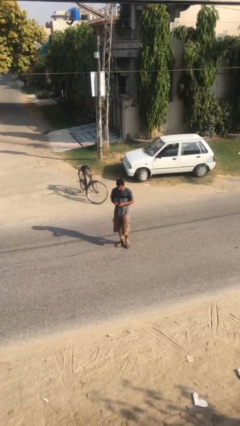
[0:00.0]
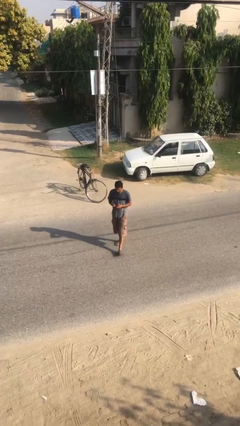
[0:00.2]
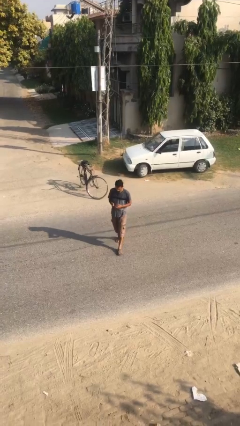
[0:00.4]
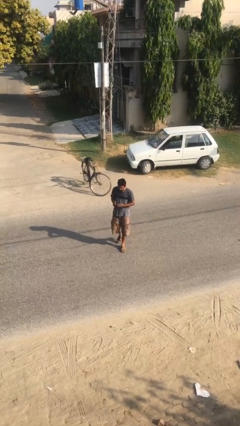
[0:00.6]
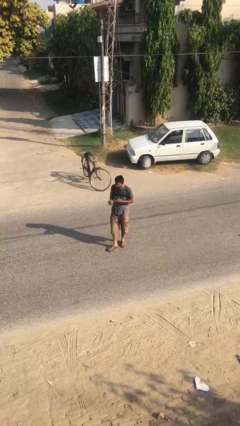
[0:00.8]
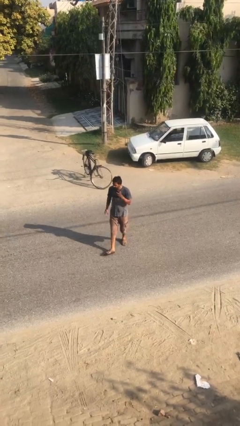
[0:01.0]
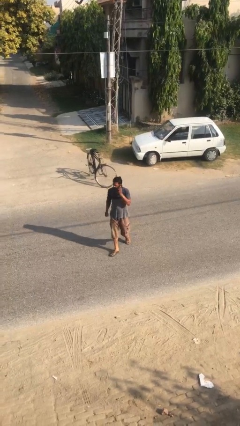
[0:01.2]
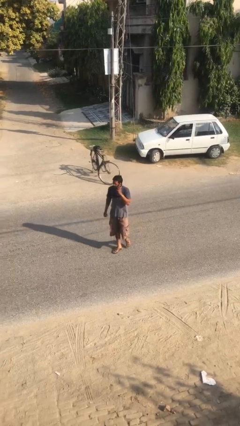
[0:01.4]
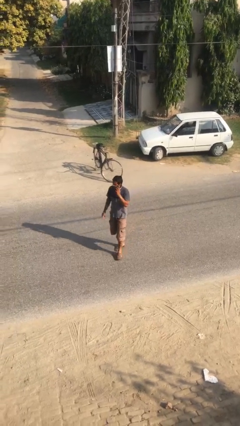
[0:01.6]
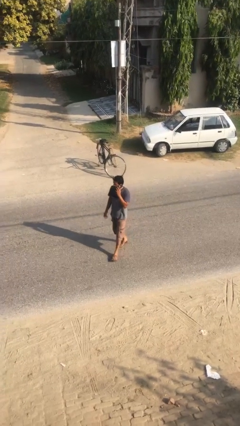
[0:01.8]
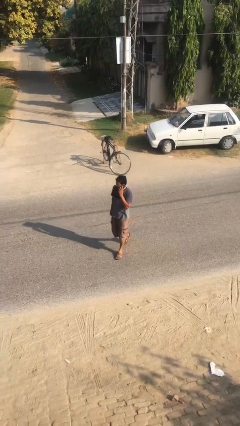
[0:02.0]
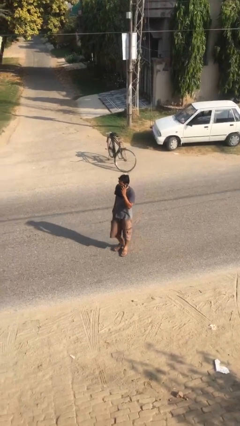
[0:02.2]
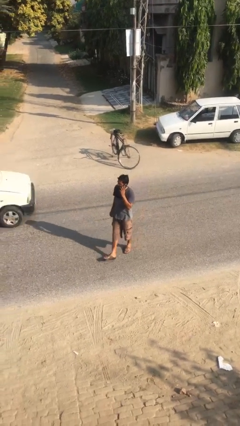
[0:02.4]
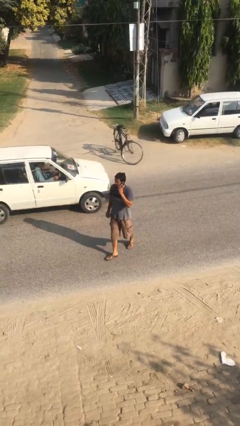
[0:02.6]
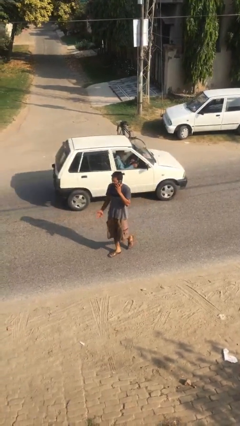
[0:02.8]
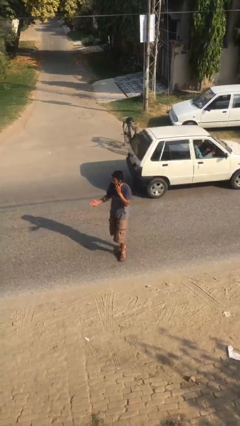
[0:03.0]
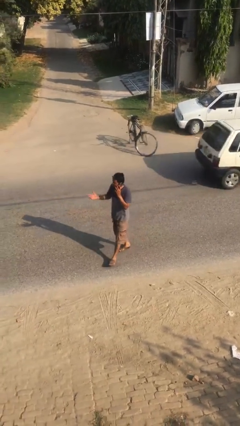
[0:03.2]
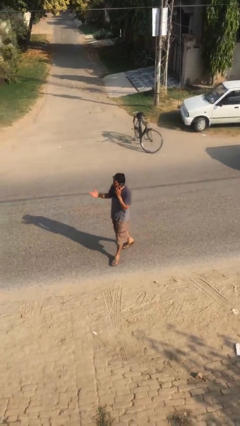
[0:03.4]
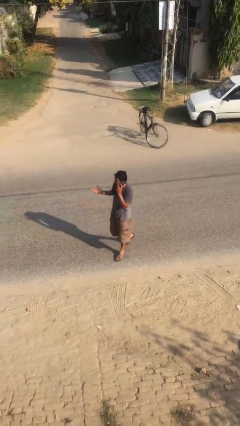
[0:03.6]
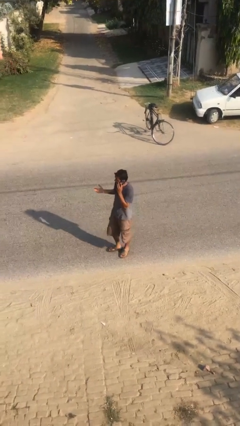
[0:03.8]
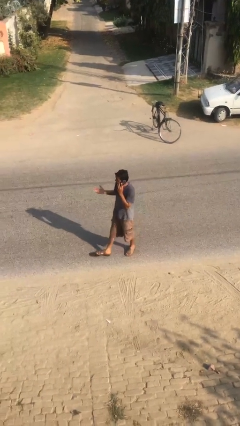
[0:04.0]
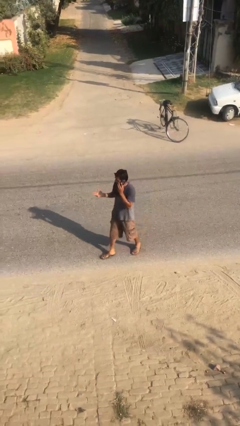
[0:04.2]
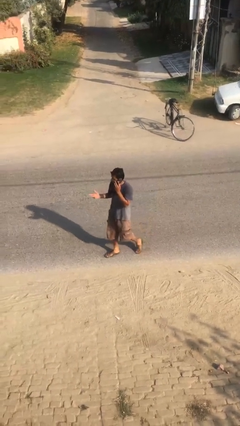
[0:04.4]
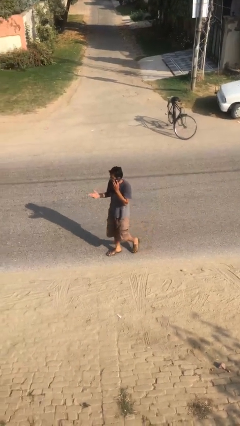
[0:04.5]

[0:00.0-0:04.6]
person talks on phone

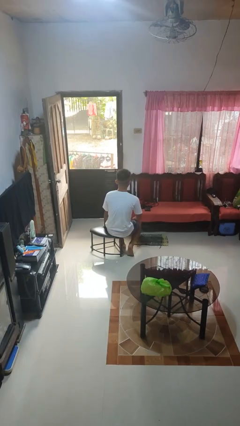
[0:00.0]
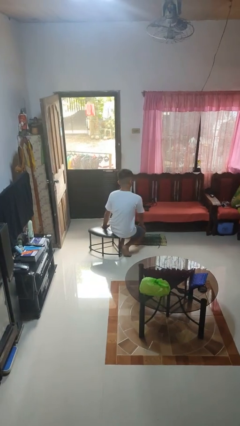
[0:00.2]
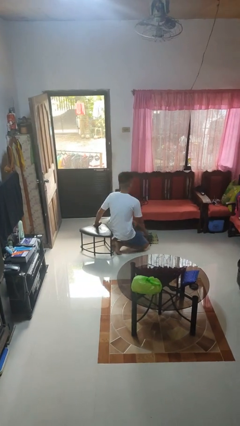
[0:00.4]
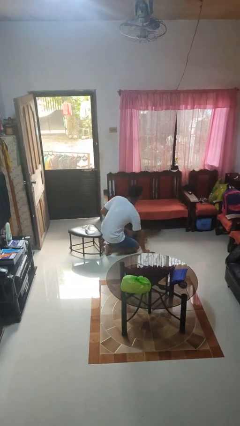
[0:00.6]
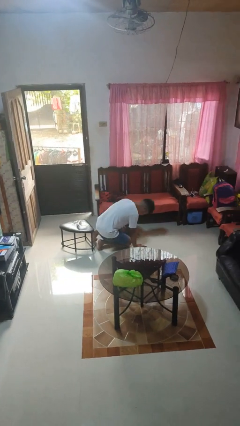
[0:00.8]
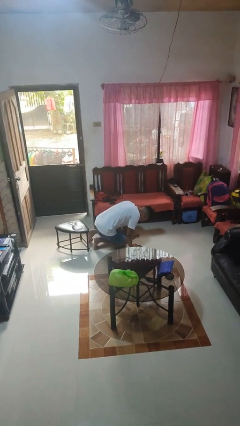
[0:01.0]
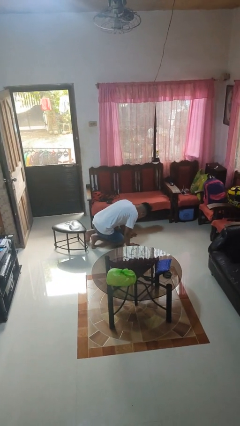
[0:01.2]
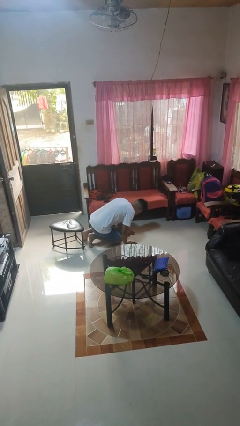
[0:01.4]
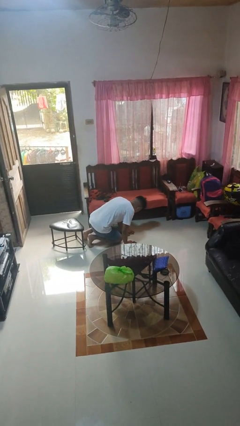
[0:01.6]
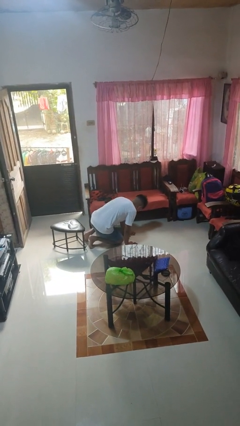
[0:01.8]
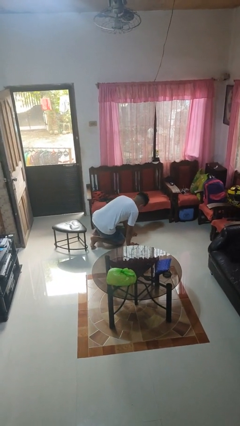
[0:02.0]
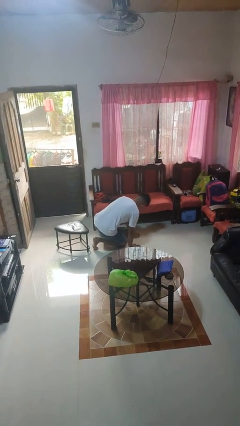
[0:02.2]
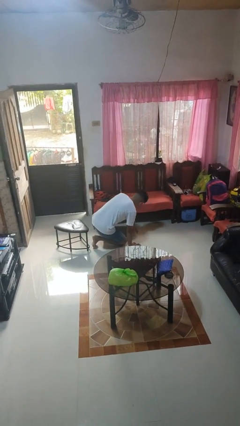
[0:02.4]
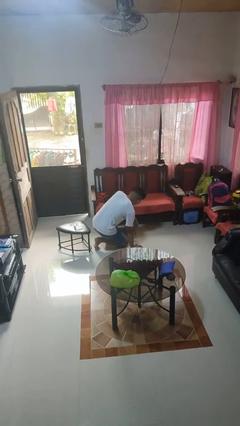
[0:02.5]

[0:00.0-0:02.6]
person falls from chair

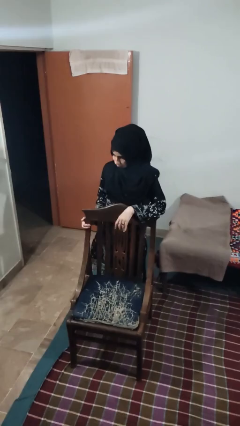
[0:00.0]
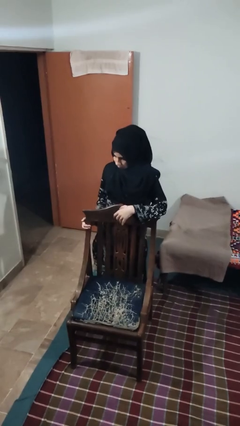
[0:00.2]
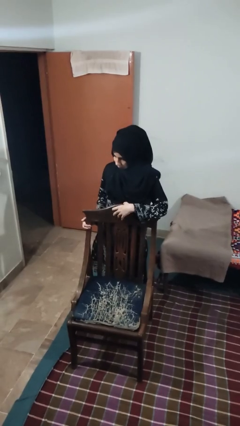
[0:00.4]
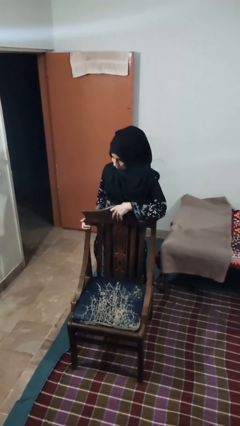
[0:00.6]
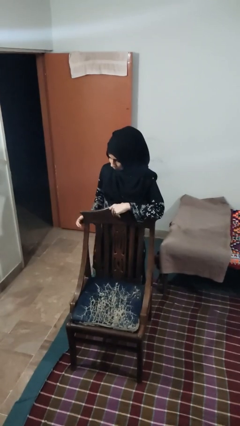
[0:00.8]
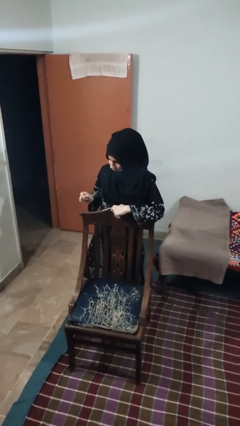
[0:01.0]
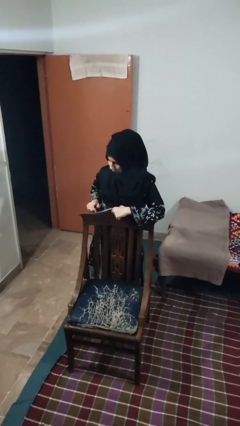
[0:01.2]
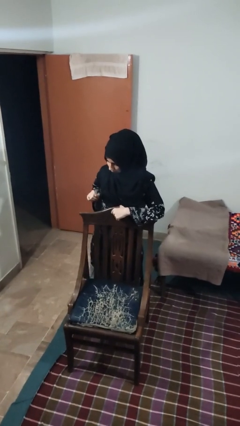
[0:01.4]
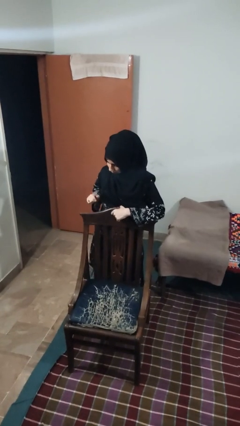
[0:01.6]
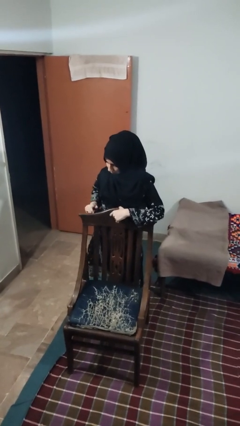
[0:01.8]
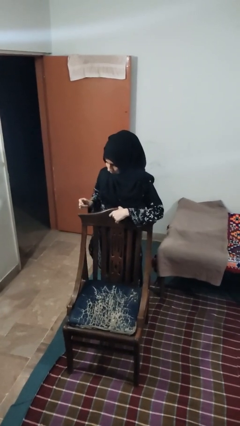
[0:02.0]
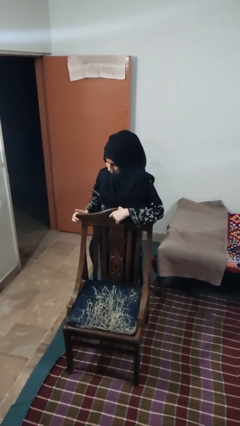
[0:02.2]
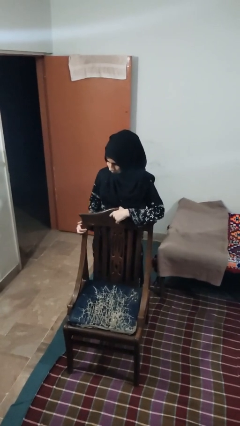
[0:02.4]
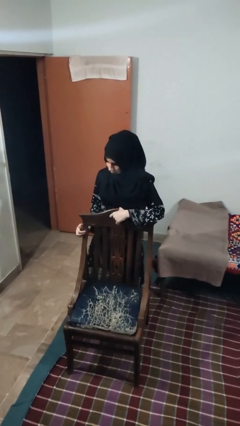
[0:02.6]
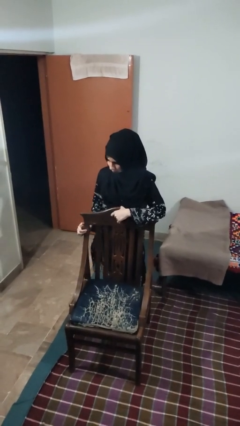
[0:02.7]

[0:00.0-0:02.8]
person taps object with finger

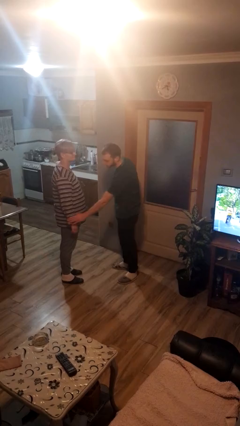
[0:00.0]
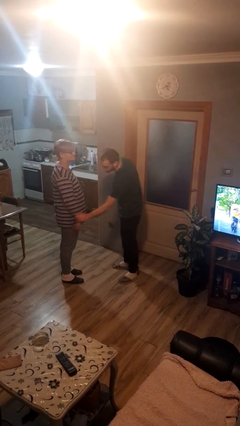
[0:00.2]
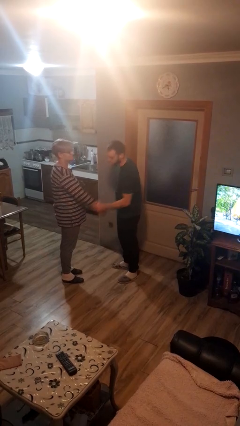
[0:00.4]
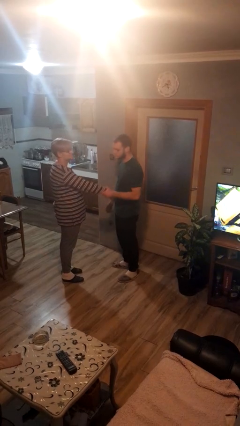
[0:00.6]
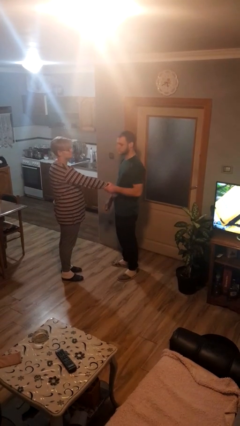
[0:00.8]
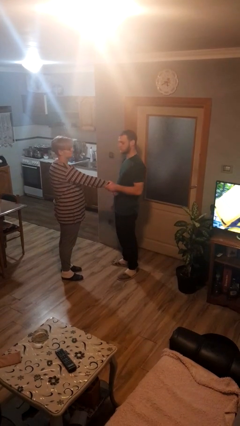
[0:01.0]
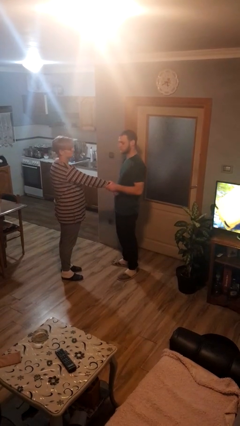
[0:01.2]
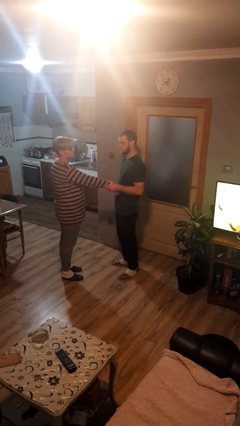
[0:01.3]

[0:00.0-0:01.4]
person grabs person by forearm

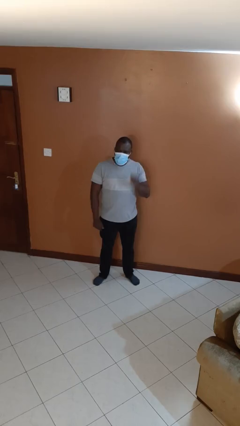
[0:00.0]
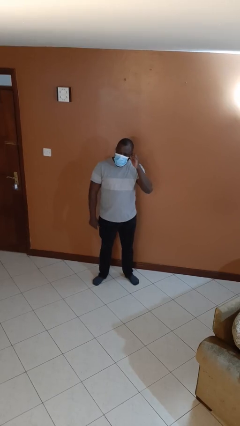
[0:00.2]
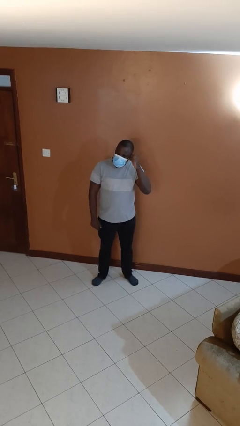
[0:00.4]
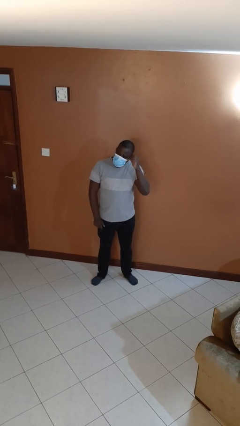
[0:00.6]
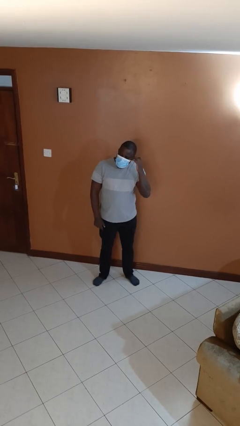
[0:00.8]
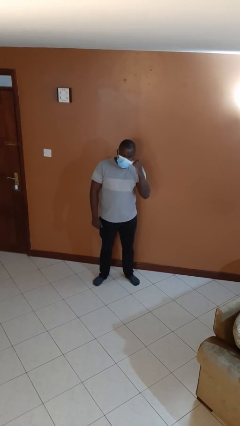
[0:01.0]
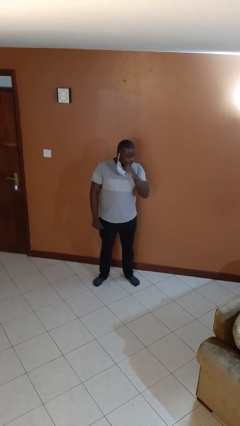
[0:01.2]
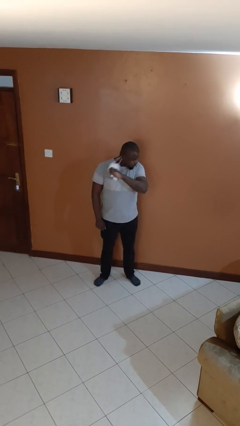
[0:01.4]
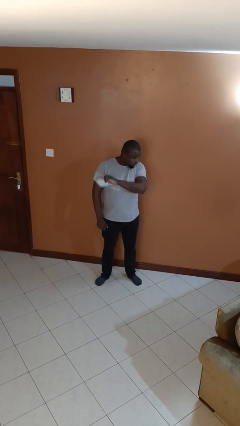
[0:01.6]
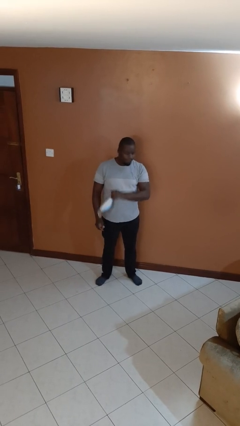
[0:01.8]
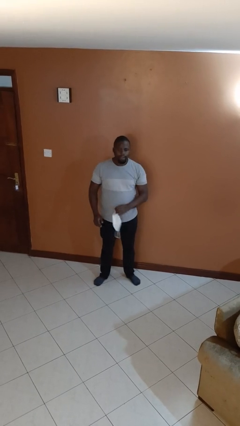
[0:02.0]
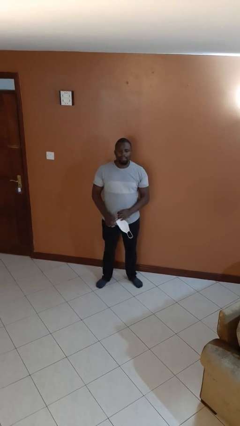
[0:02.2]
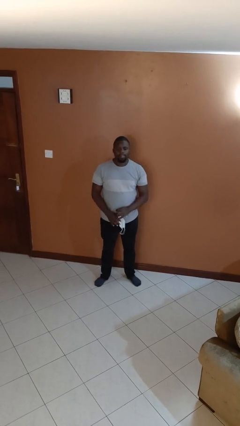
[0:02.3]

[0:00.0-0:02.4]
person takes off facemask

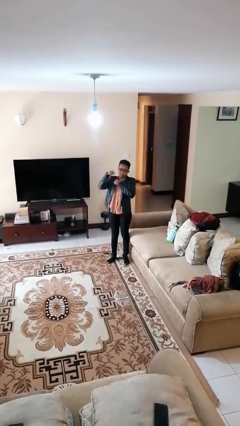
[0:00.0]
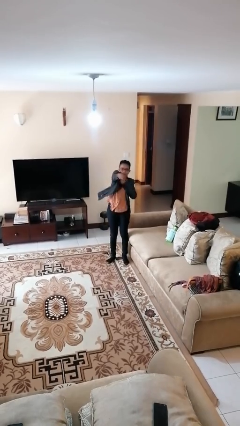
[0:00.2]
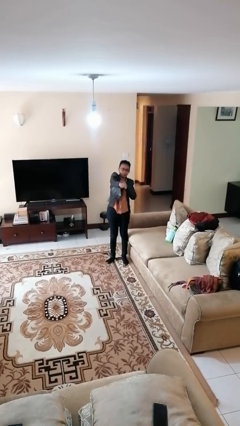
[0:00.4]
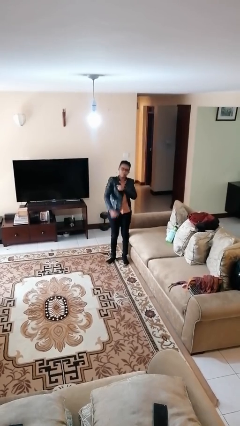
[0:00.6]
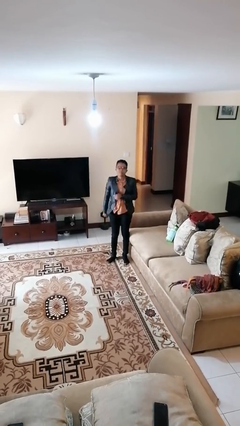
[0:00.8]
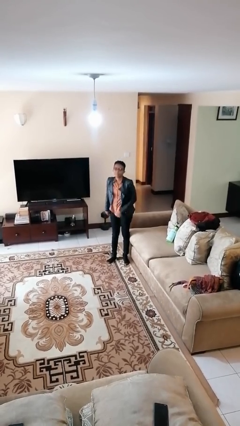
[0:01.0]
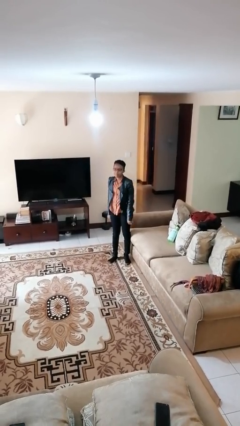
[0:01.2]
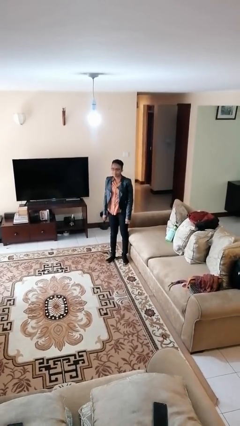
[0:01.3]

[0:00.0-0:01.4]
person punches

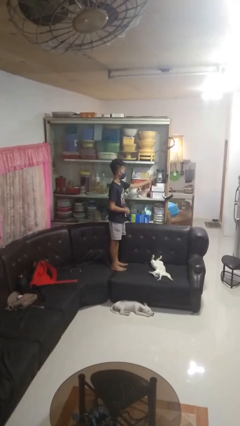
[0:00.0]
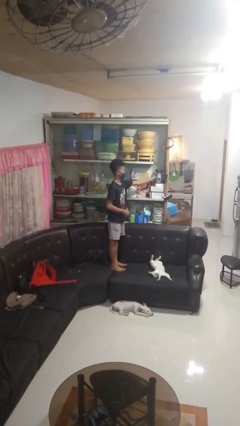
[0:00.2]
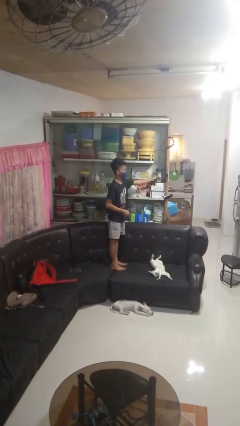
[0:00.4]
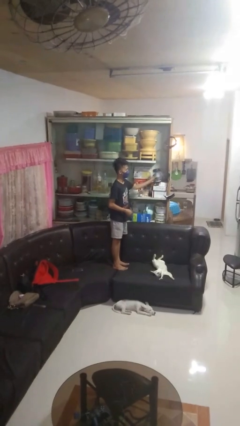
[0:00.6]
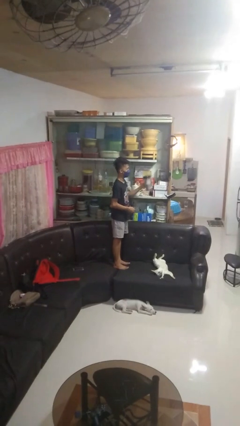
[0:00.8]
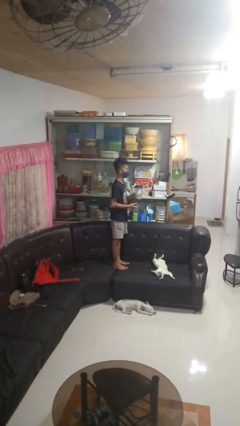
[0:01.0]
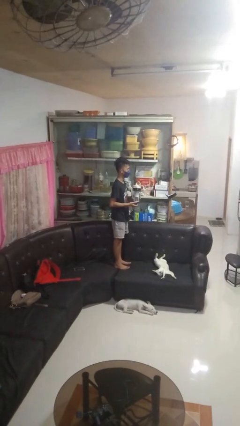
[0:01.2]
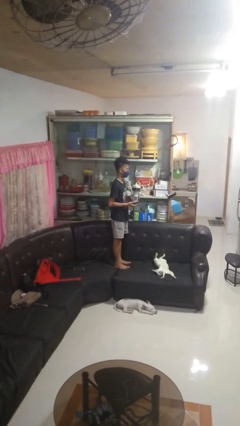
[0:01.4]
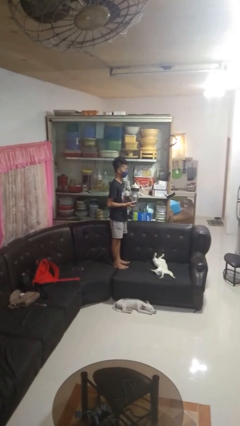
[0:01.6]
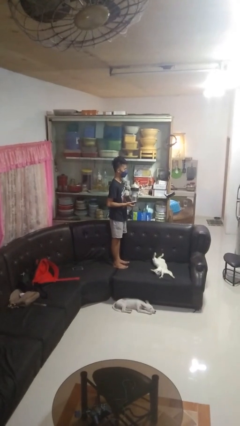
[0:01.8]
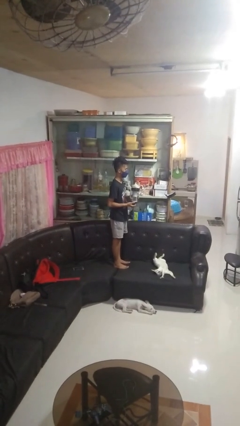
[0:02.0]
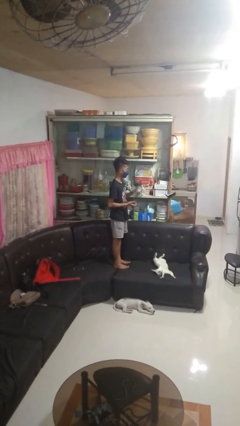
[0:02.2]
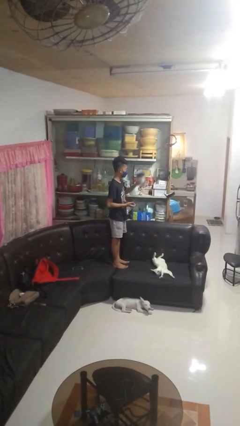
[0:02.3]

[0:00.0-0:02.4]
person picks up object from cabinet
